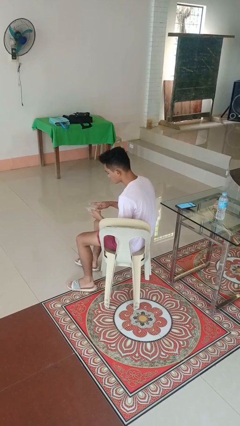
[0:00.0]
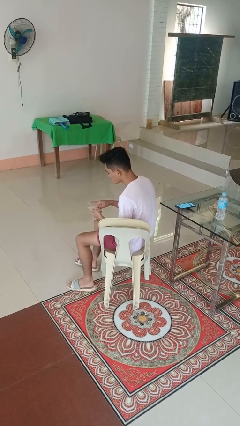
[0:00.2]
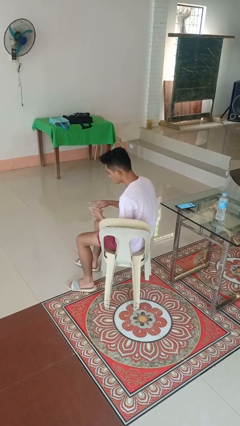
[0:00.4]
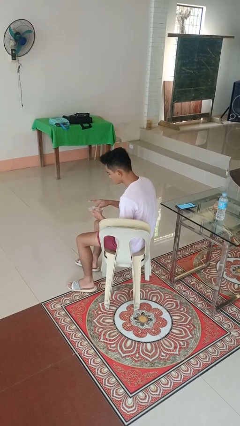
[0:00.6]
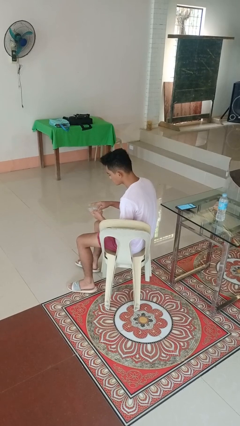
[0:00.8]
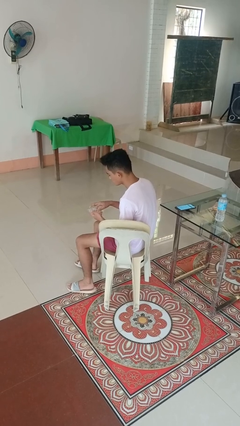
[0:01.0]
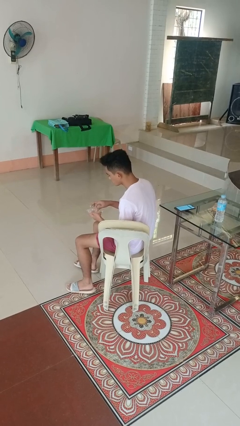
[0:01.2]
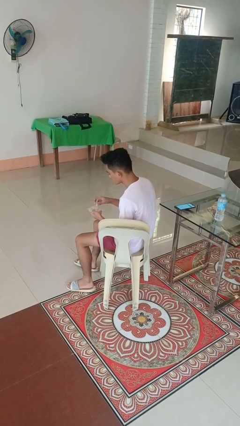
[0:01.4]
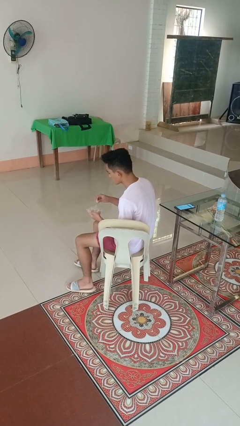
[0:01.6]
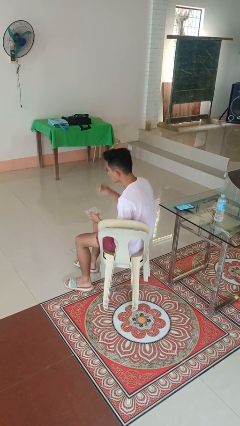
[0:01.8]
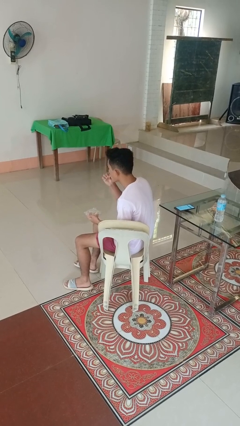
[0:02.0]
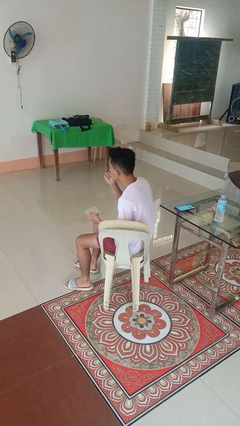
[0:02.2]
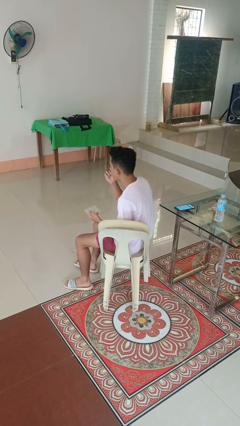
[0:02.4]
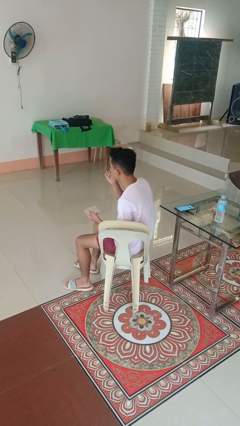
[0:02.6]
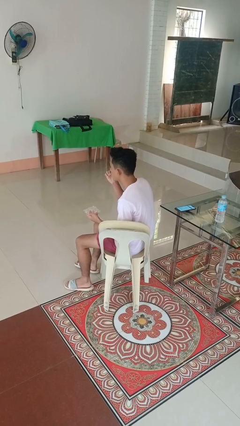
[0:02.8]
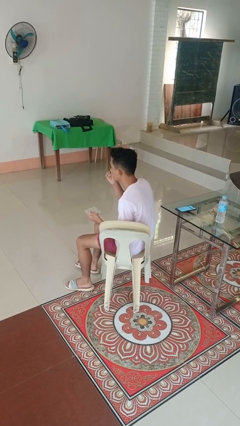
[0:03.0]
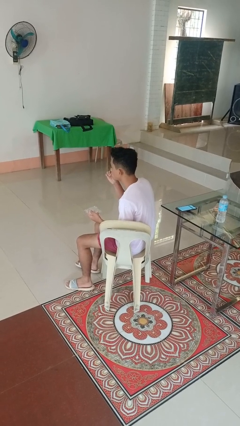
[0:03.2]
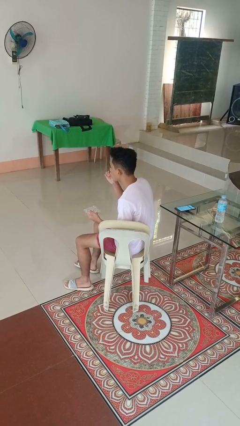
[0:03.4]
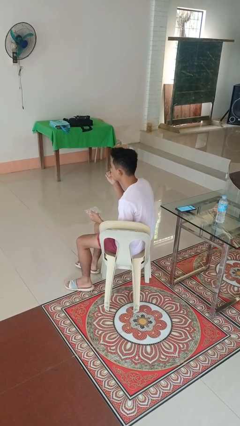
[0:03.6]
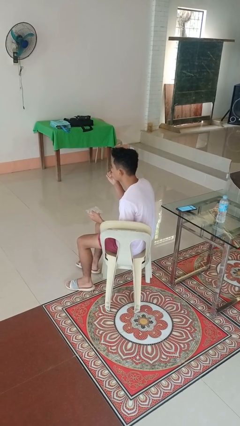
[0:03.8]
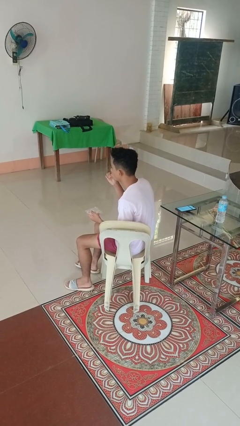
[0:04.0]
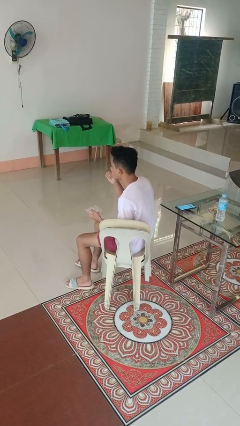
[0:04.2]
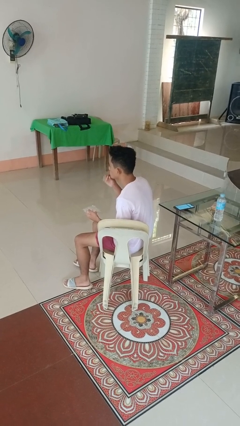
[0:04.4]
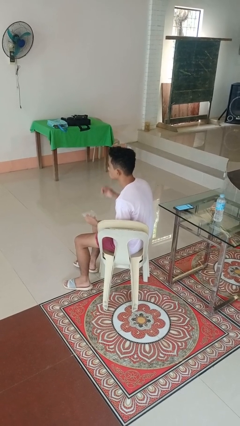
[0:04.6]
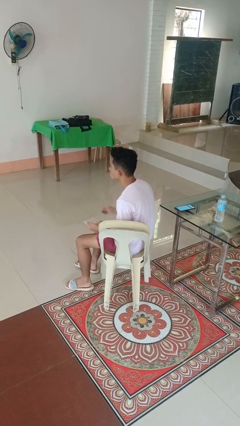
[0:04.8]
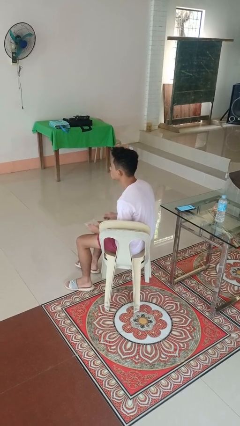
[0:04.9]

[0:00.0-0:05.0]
person eats snack from bag

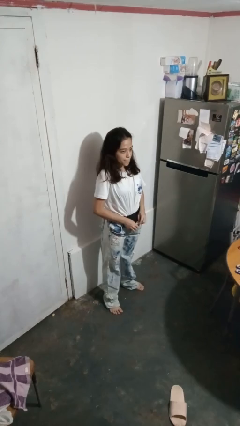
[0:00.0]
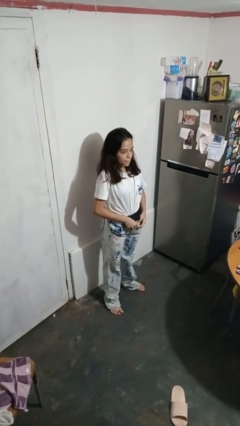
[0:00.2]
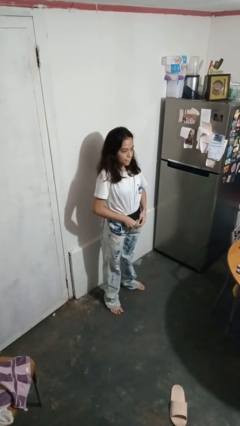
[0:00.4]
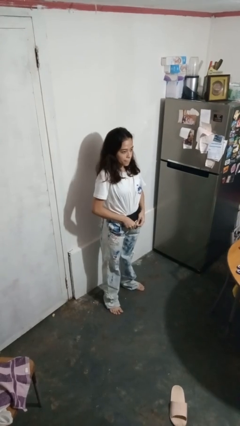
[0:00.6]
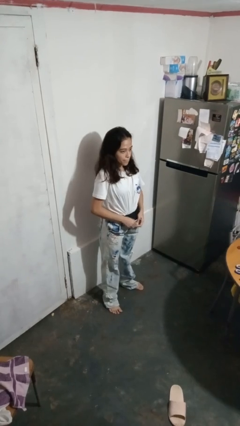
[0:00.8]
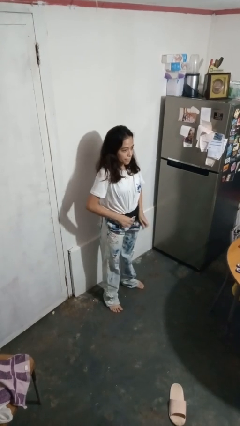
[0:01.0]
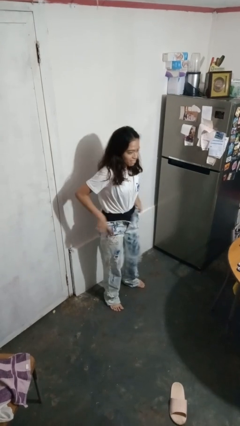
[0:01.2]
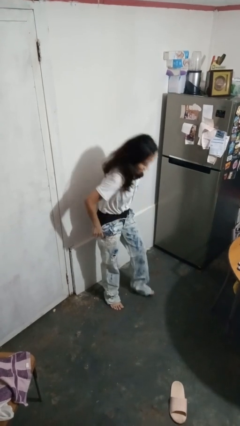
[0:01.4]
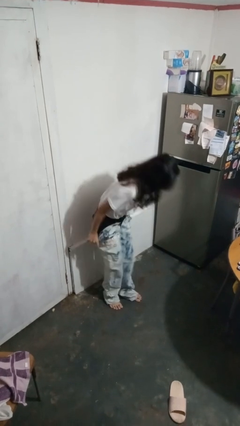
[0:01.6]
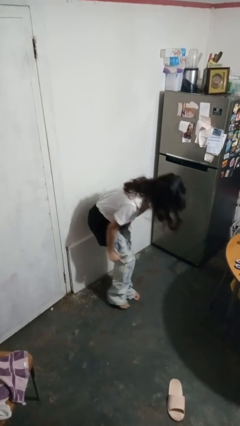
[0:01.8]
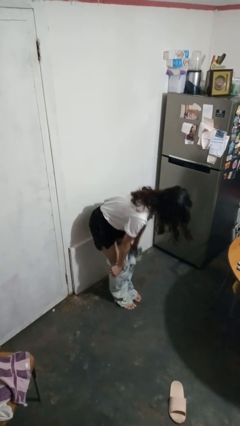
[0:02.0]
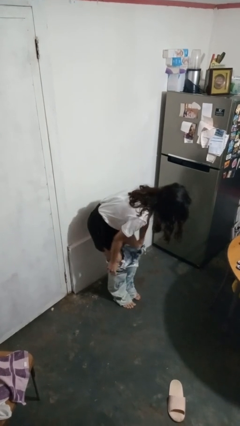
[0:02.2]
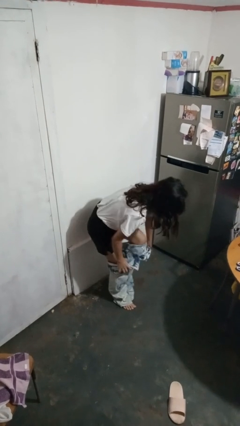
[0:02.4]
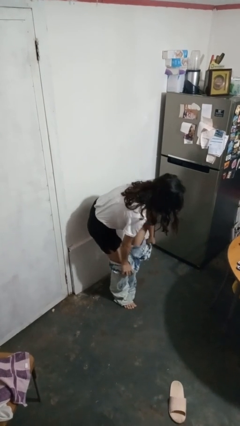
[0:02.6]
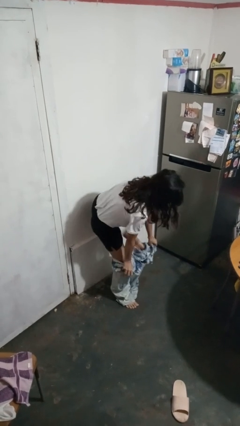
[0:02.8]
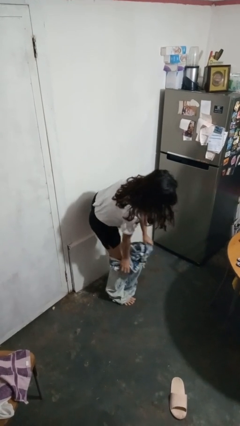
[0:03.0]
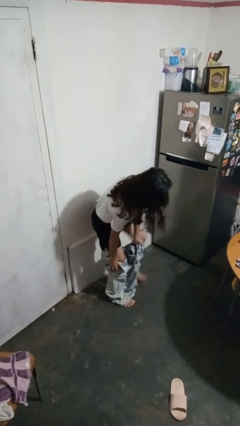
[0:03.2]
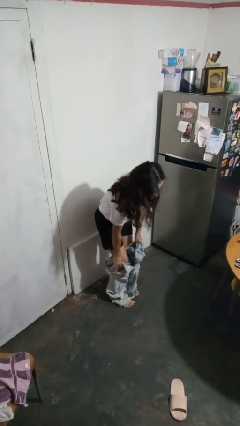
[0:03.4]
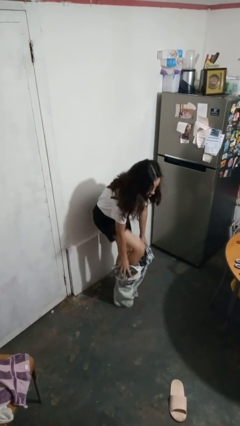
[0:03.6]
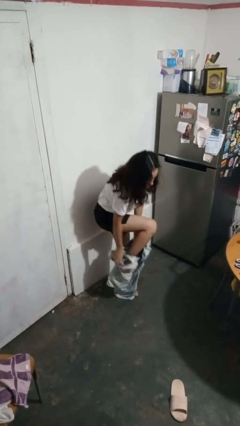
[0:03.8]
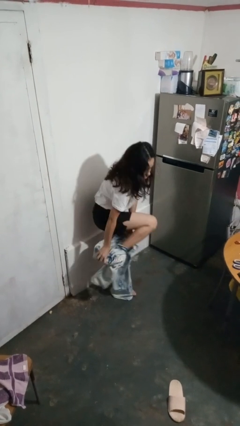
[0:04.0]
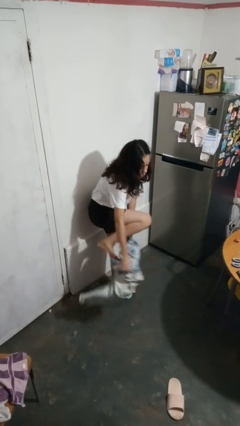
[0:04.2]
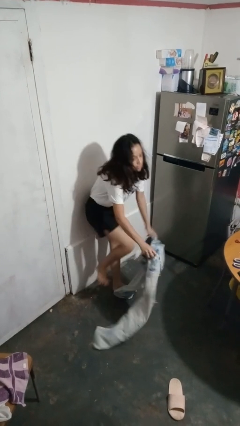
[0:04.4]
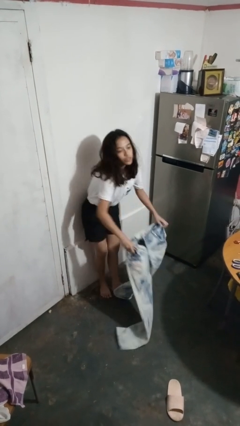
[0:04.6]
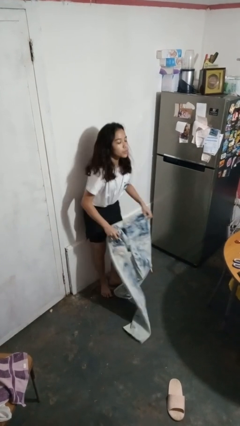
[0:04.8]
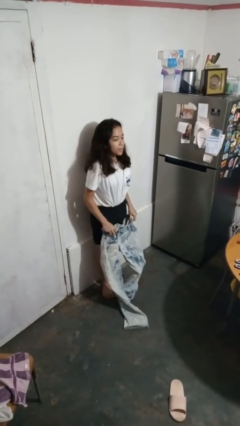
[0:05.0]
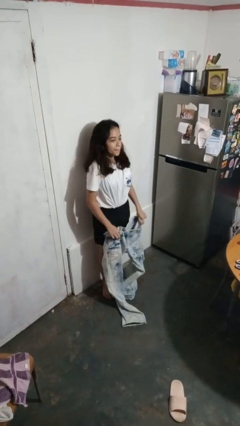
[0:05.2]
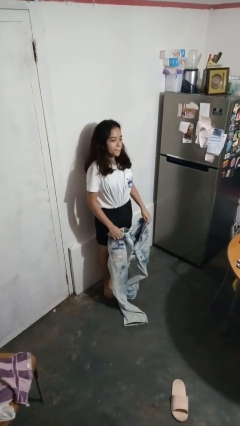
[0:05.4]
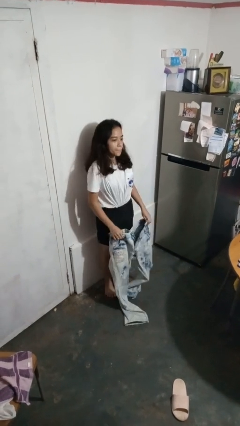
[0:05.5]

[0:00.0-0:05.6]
person takes off pants

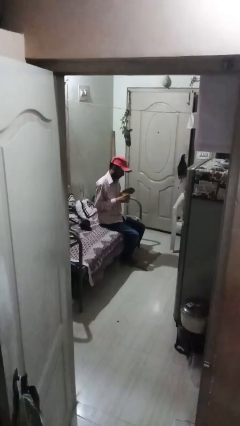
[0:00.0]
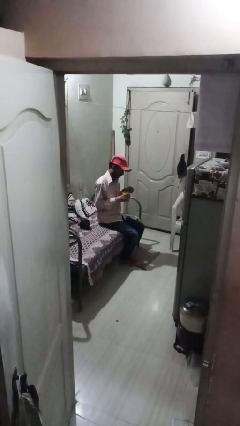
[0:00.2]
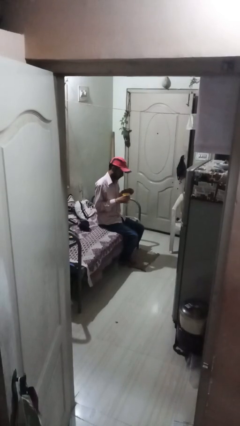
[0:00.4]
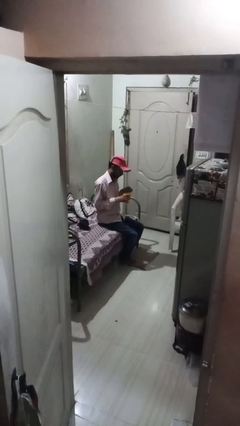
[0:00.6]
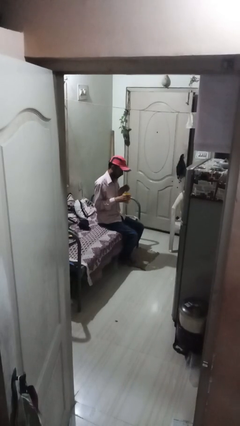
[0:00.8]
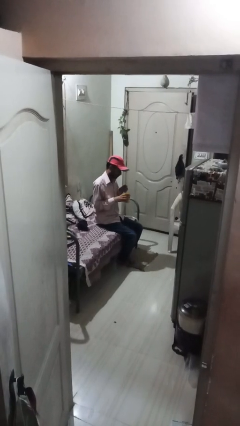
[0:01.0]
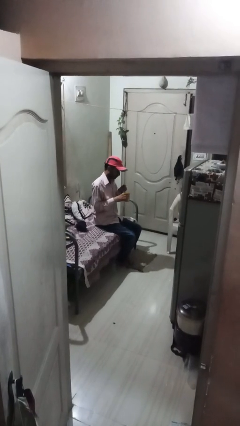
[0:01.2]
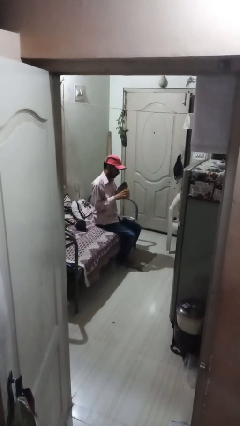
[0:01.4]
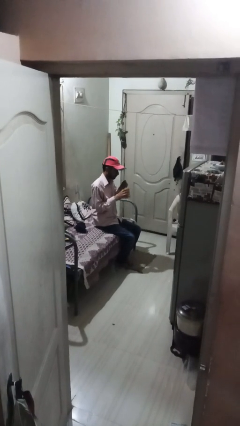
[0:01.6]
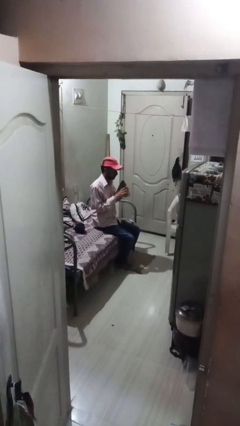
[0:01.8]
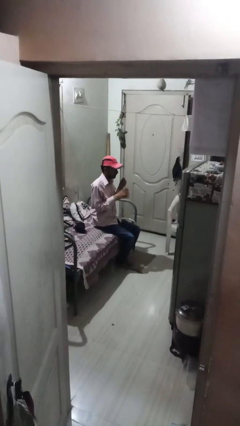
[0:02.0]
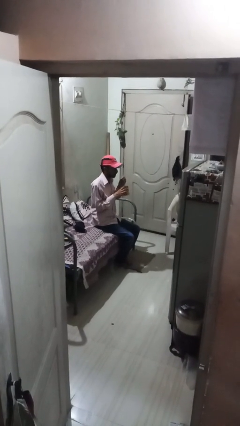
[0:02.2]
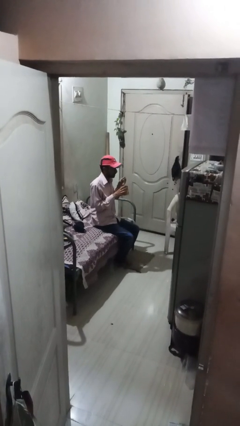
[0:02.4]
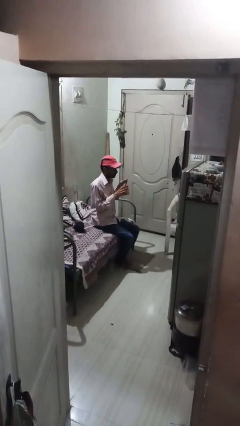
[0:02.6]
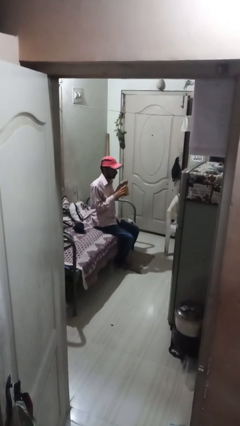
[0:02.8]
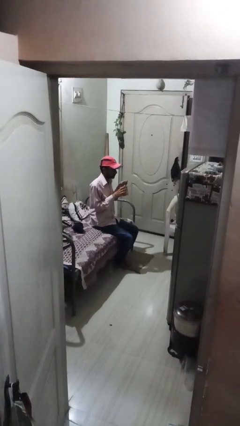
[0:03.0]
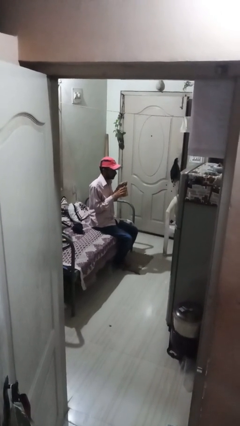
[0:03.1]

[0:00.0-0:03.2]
person stirs mug

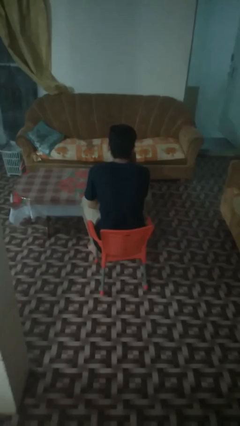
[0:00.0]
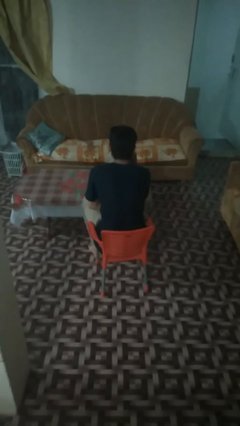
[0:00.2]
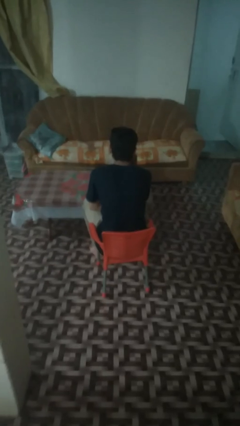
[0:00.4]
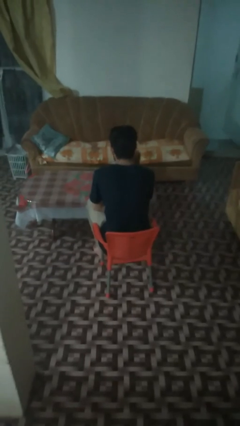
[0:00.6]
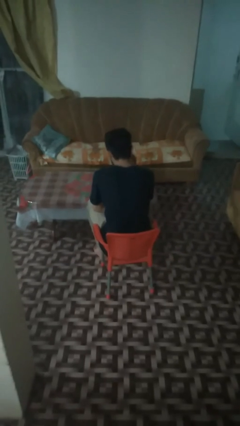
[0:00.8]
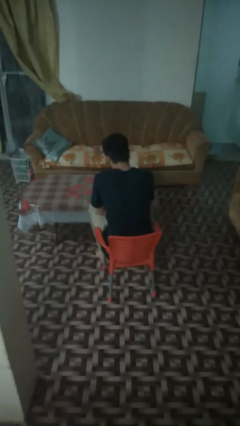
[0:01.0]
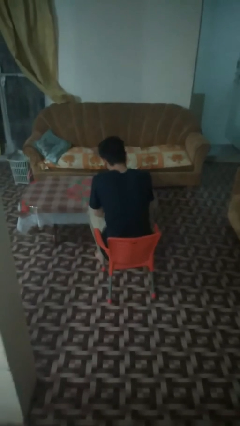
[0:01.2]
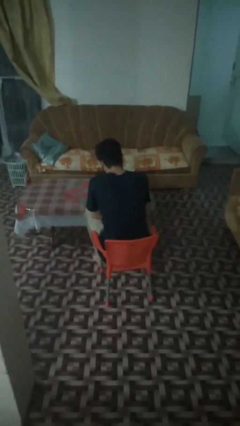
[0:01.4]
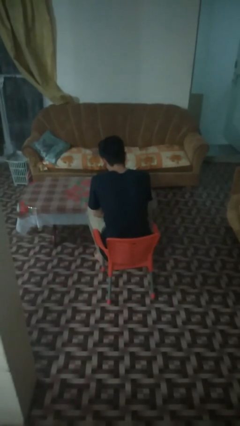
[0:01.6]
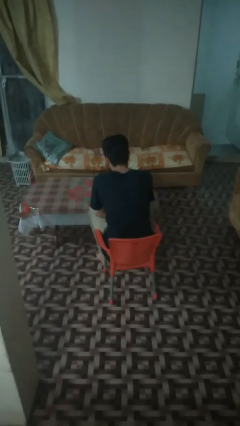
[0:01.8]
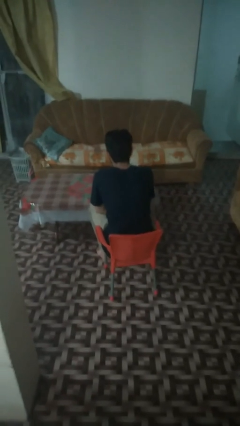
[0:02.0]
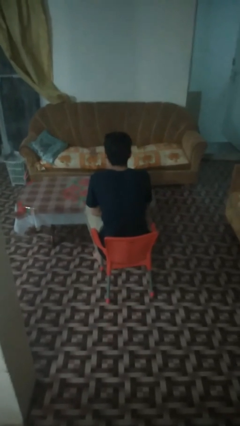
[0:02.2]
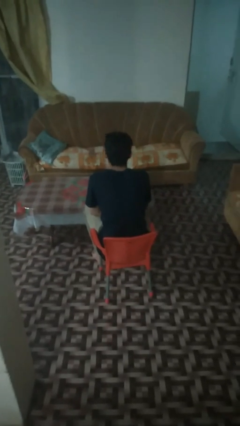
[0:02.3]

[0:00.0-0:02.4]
person puts down object on table

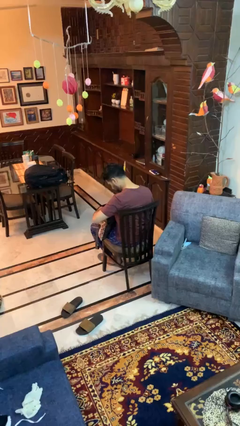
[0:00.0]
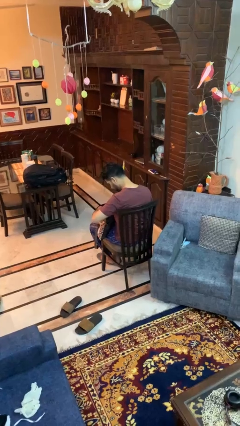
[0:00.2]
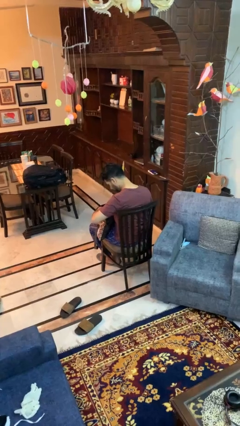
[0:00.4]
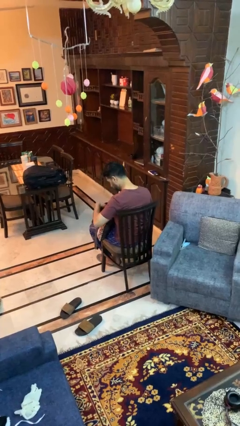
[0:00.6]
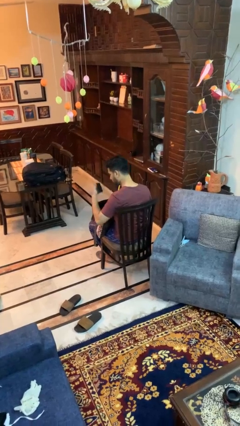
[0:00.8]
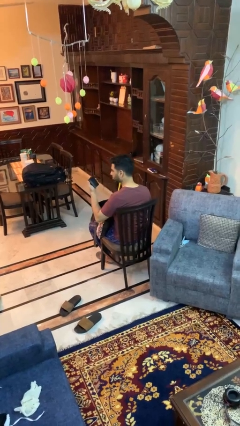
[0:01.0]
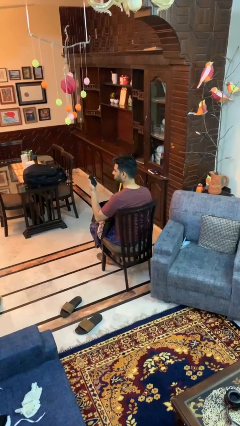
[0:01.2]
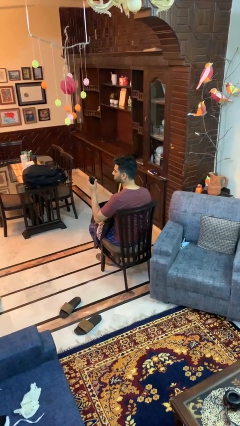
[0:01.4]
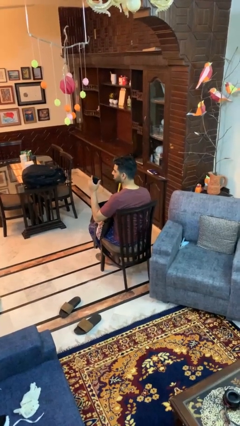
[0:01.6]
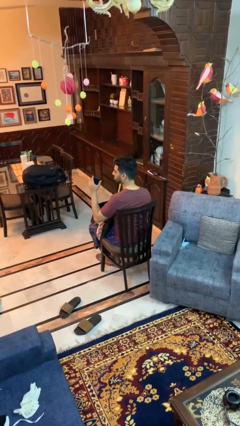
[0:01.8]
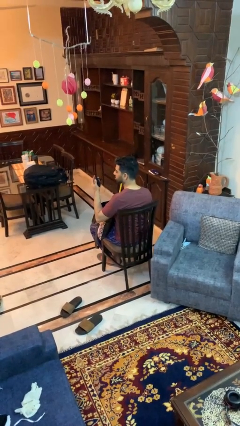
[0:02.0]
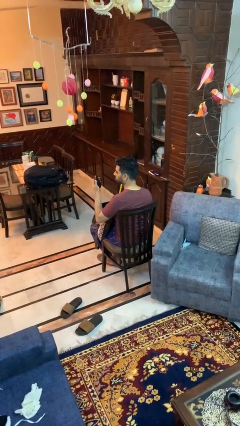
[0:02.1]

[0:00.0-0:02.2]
person takes object from purse
